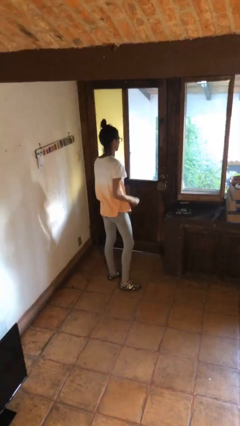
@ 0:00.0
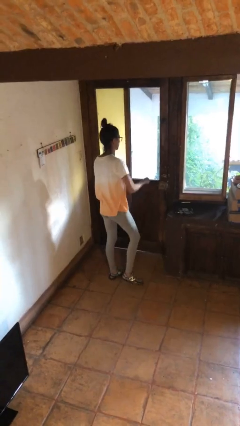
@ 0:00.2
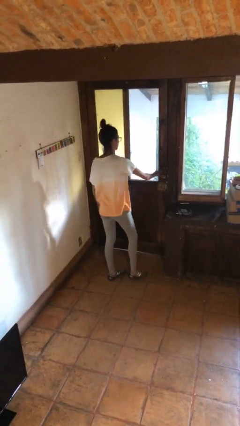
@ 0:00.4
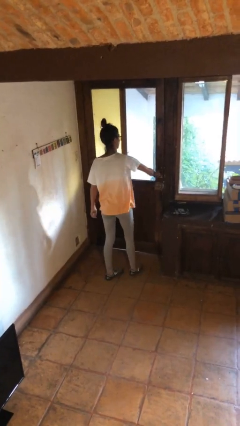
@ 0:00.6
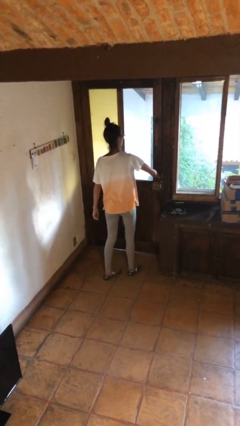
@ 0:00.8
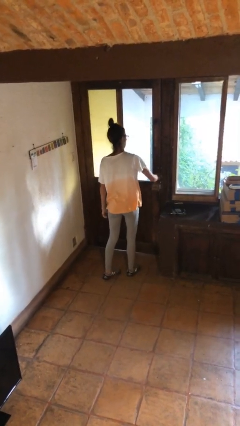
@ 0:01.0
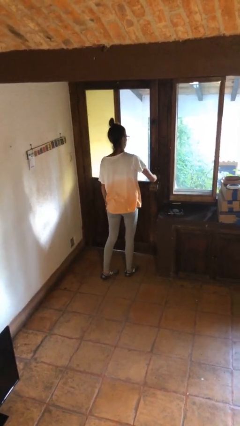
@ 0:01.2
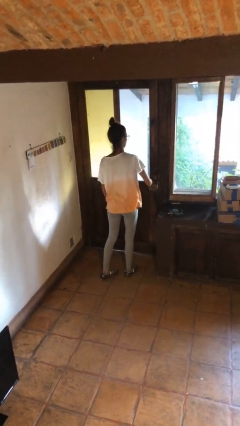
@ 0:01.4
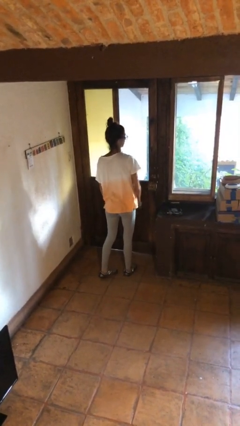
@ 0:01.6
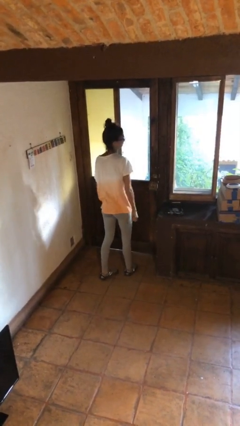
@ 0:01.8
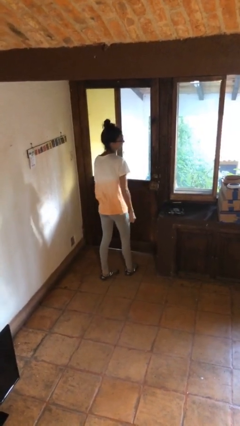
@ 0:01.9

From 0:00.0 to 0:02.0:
person locks door with keys

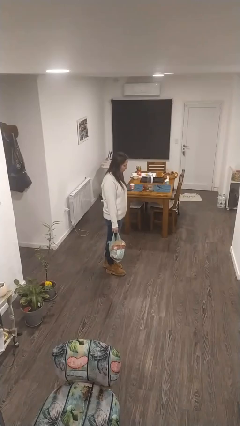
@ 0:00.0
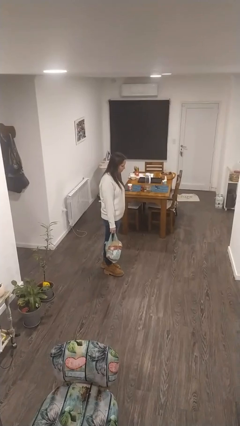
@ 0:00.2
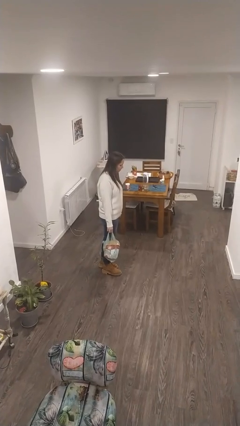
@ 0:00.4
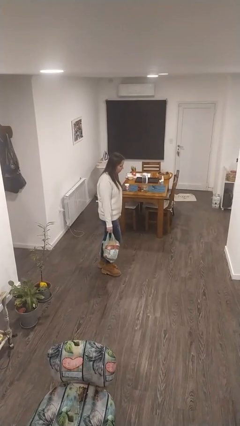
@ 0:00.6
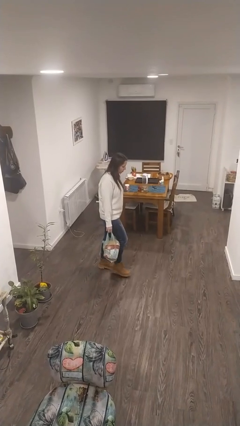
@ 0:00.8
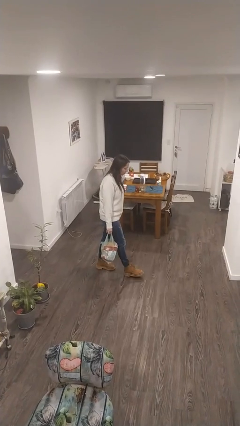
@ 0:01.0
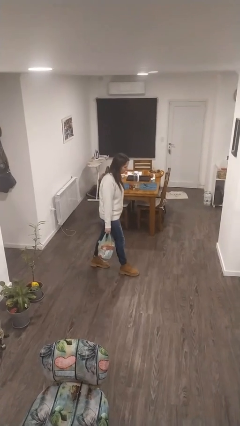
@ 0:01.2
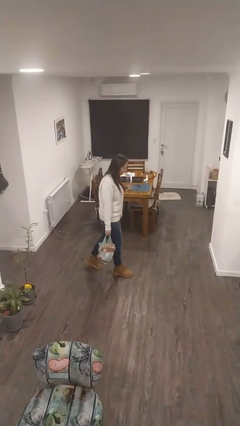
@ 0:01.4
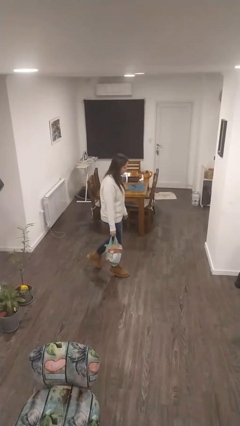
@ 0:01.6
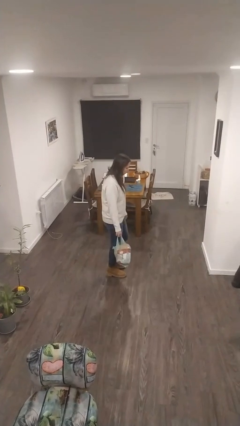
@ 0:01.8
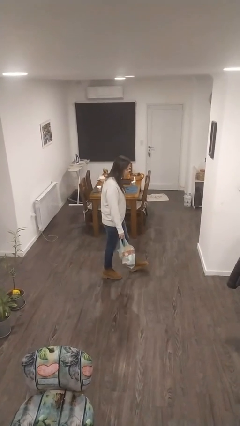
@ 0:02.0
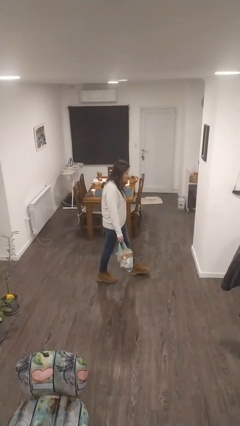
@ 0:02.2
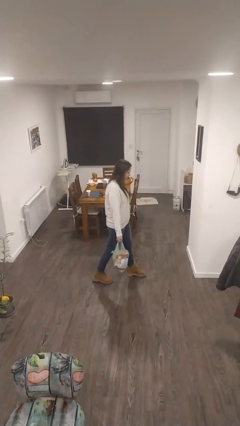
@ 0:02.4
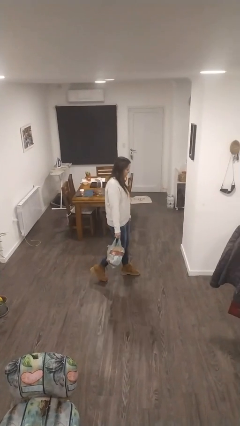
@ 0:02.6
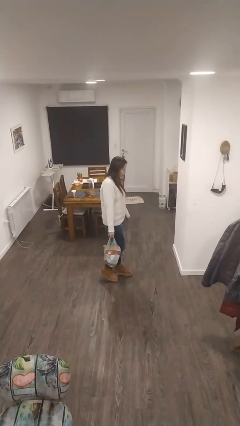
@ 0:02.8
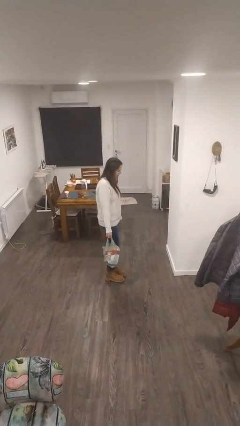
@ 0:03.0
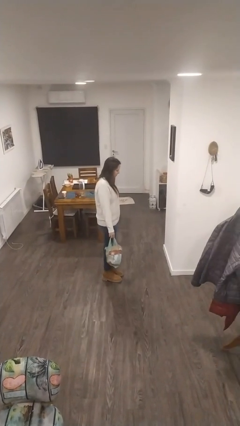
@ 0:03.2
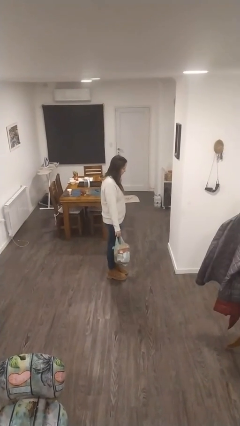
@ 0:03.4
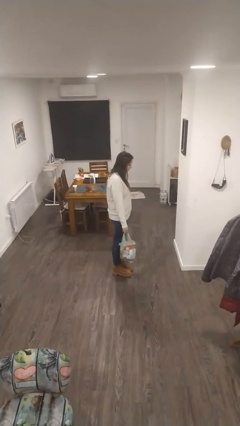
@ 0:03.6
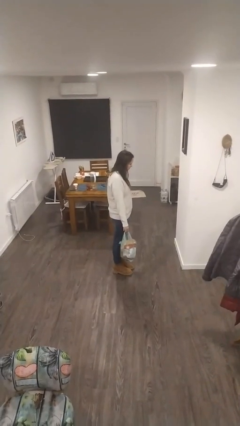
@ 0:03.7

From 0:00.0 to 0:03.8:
person carries groceries

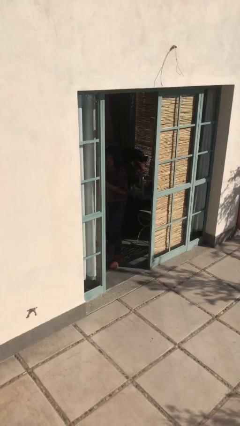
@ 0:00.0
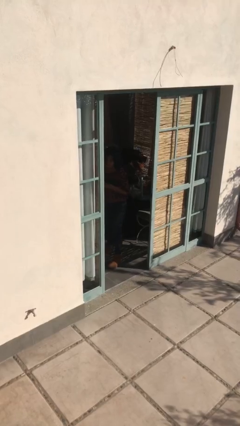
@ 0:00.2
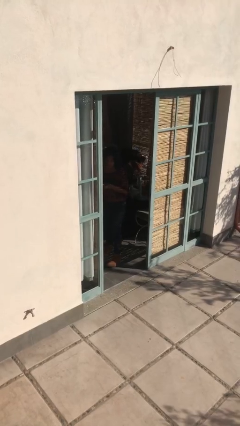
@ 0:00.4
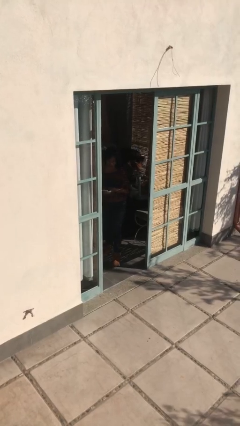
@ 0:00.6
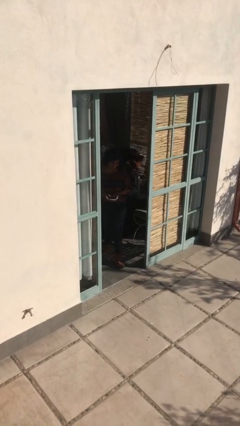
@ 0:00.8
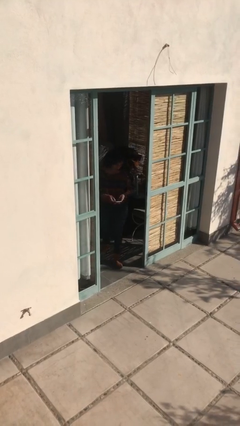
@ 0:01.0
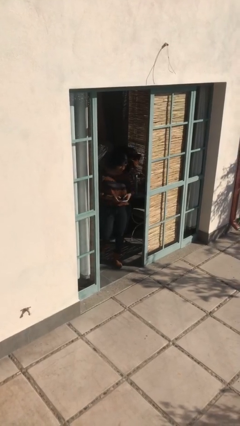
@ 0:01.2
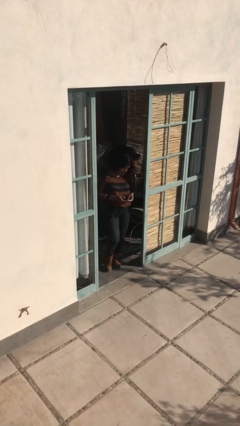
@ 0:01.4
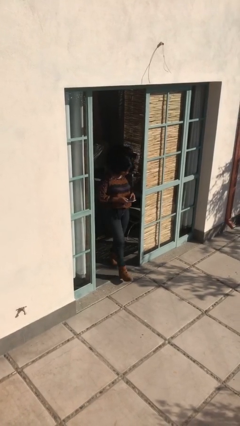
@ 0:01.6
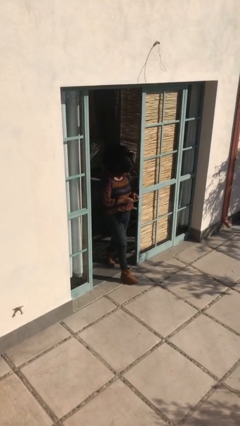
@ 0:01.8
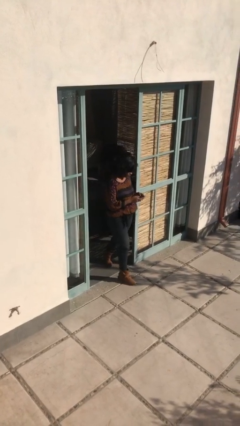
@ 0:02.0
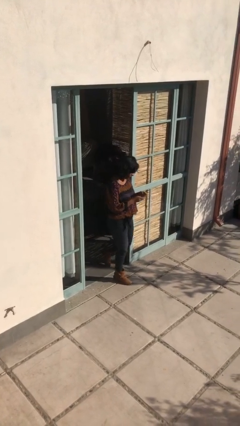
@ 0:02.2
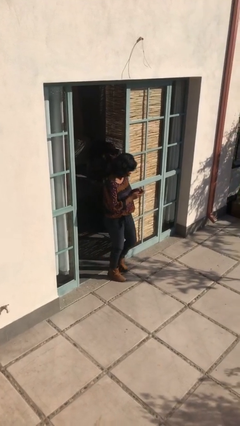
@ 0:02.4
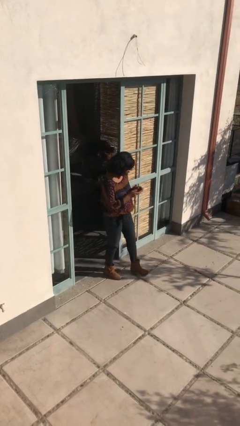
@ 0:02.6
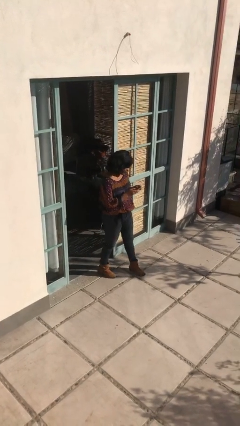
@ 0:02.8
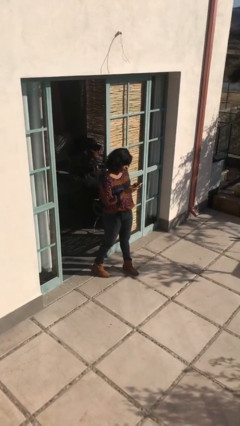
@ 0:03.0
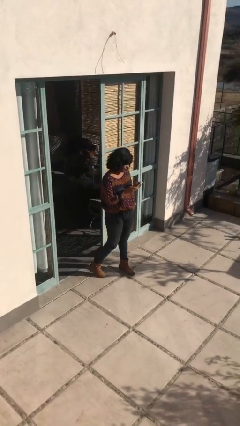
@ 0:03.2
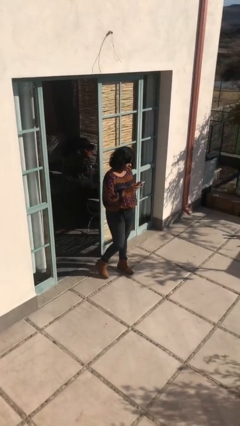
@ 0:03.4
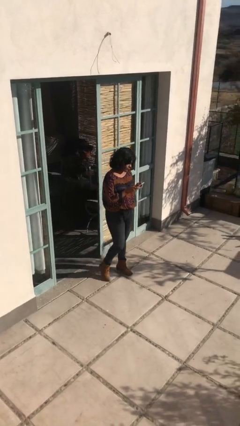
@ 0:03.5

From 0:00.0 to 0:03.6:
person enters scene through structure

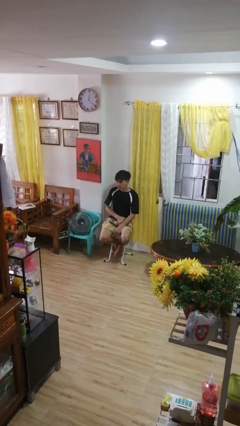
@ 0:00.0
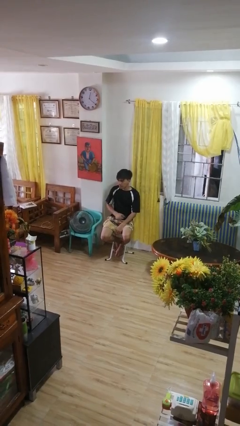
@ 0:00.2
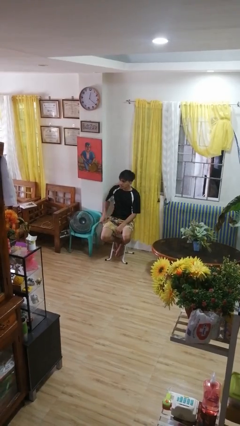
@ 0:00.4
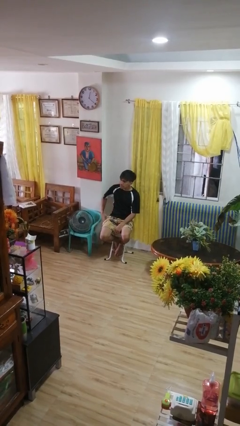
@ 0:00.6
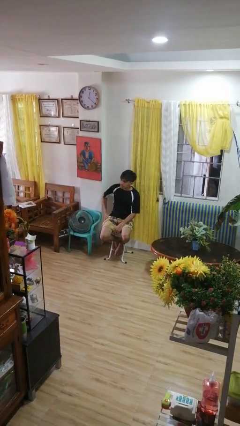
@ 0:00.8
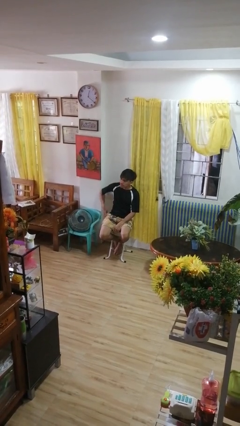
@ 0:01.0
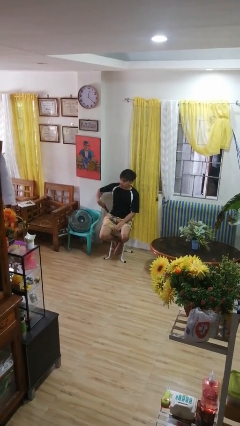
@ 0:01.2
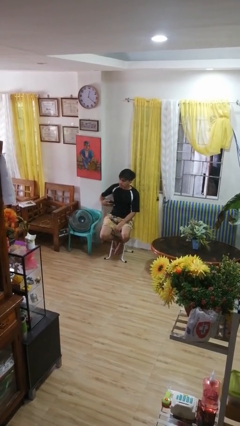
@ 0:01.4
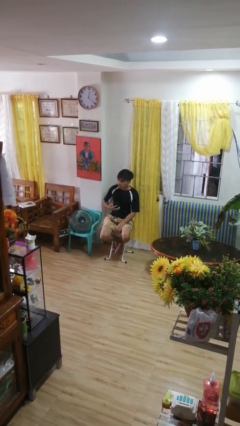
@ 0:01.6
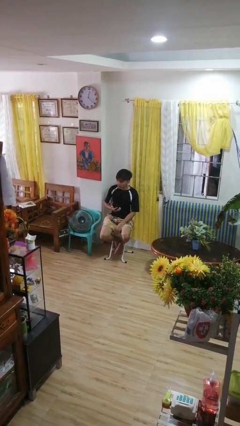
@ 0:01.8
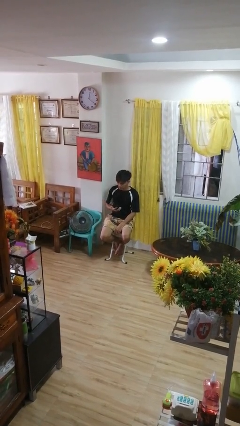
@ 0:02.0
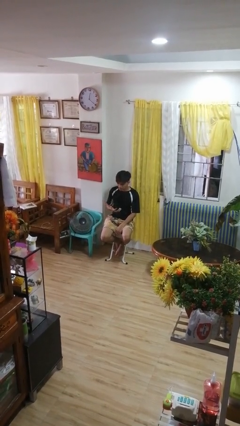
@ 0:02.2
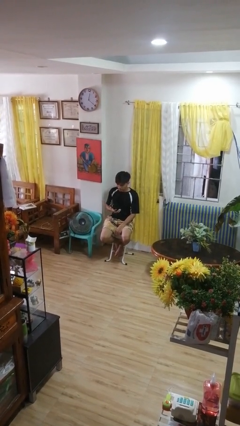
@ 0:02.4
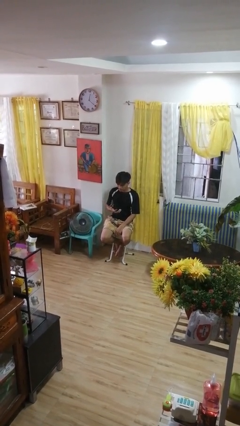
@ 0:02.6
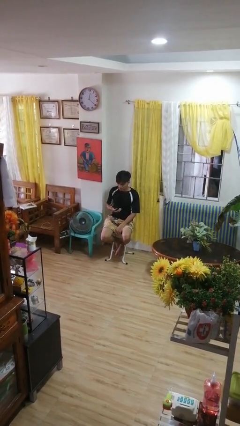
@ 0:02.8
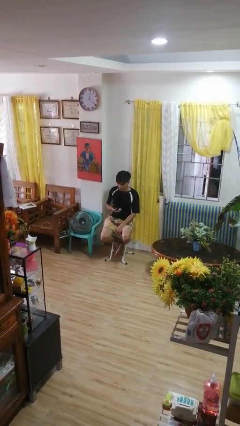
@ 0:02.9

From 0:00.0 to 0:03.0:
person takes phone from pocket

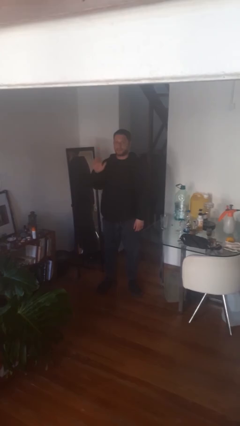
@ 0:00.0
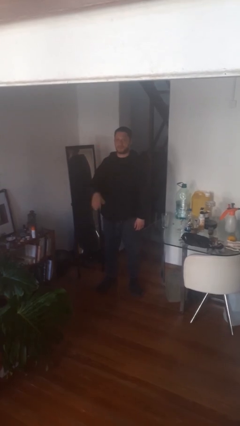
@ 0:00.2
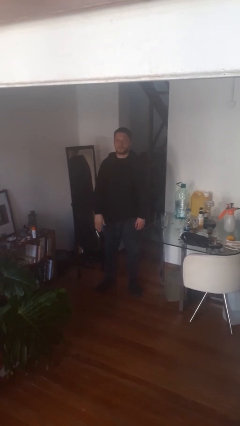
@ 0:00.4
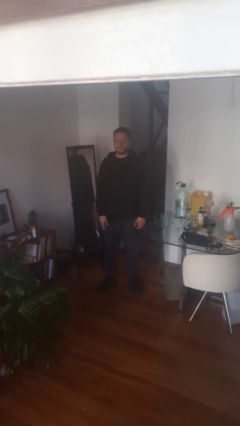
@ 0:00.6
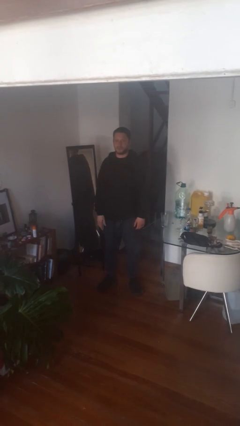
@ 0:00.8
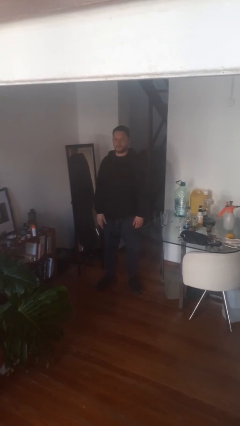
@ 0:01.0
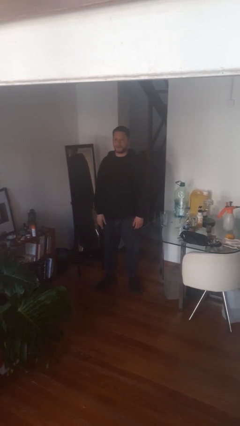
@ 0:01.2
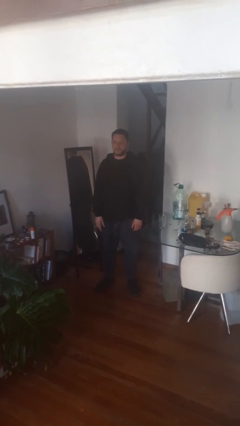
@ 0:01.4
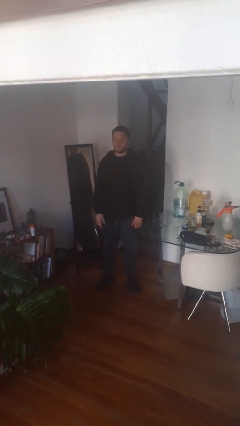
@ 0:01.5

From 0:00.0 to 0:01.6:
person gestures lower hand

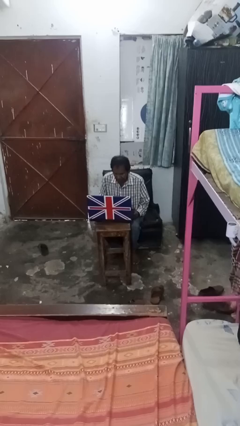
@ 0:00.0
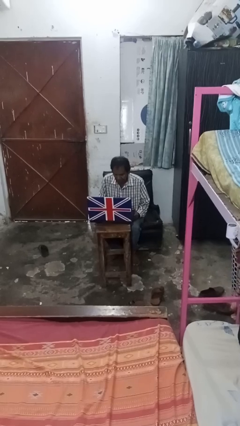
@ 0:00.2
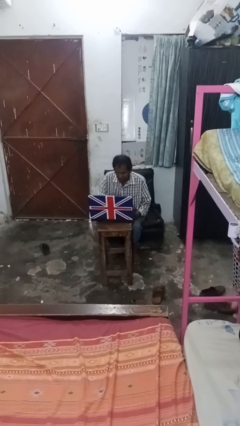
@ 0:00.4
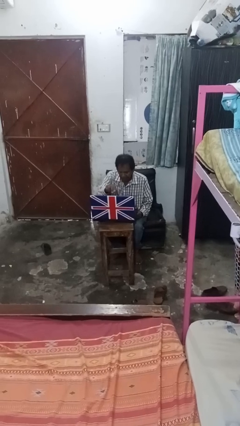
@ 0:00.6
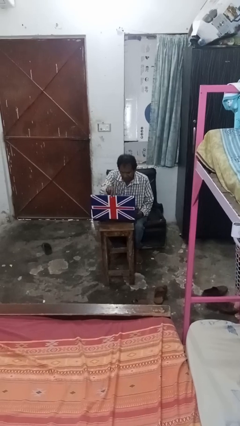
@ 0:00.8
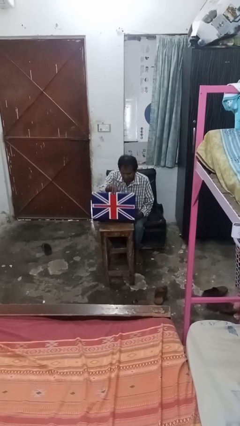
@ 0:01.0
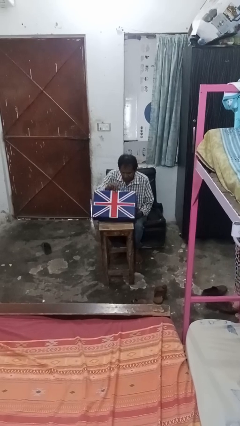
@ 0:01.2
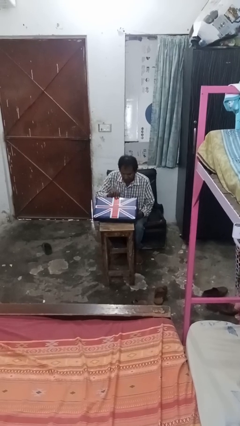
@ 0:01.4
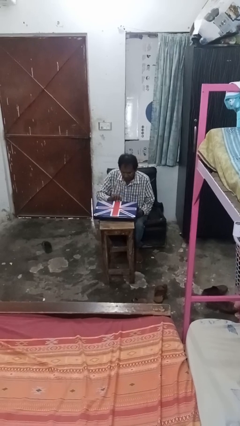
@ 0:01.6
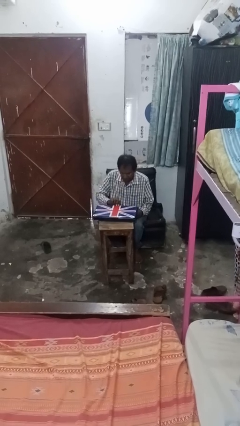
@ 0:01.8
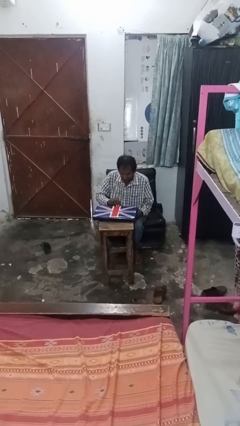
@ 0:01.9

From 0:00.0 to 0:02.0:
person closes laptop

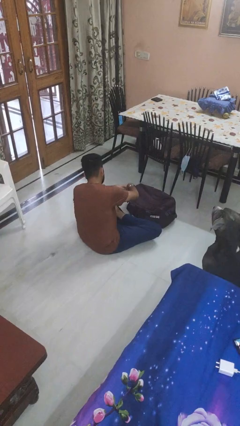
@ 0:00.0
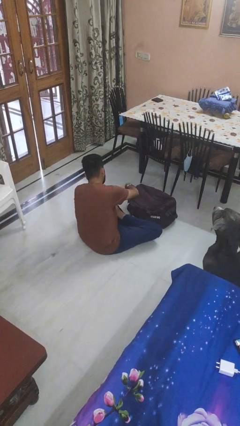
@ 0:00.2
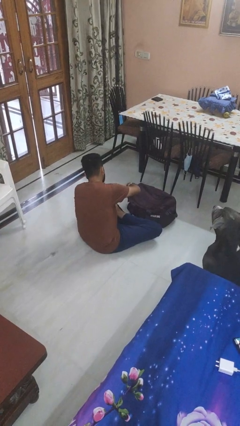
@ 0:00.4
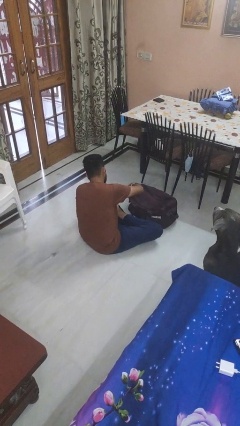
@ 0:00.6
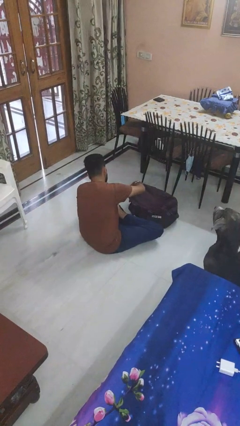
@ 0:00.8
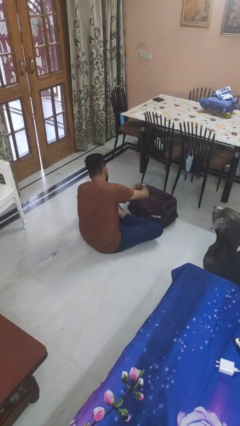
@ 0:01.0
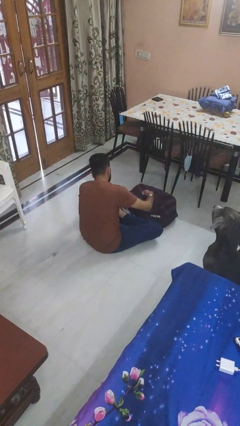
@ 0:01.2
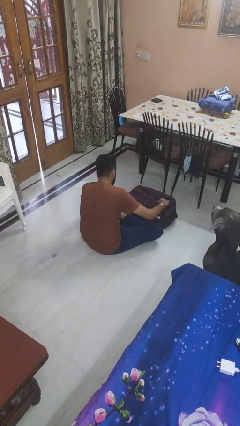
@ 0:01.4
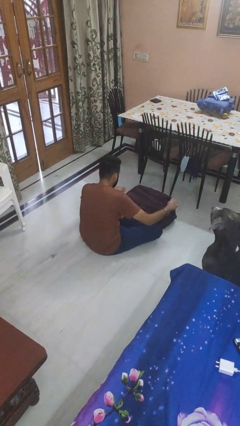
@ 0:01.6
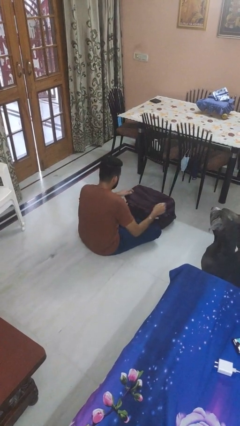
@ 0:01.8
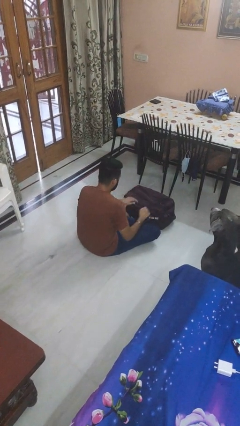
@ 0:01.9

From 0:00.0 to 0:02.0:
person opens suitcase
